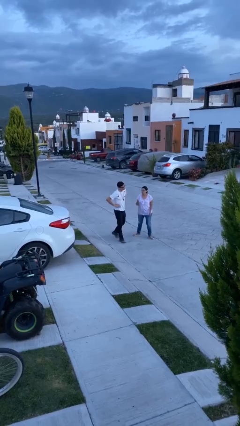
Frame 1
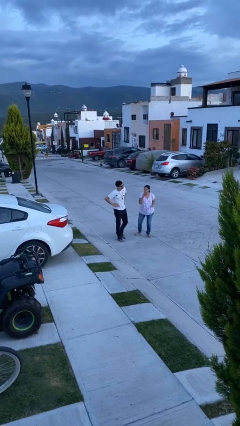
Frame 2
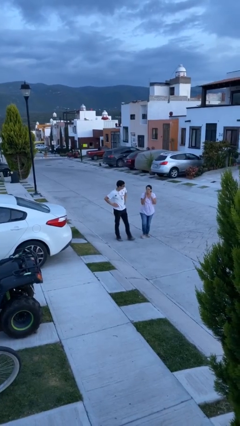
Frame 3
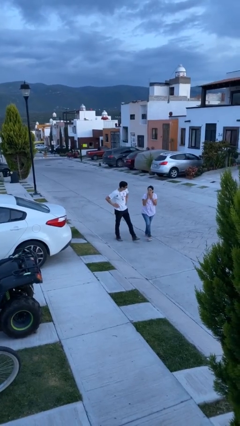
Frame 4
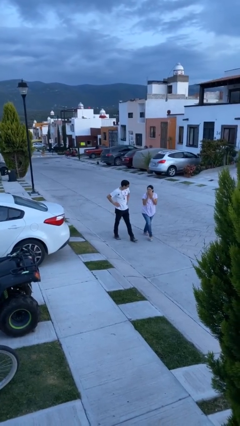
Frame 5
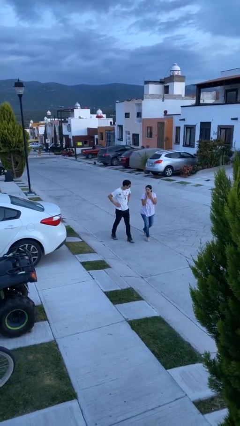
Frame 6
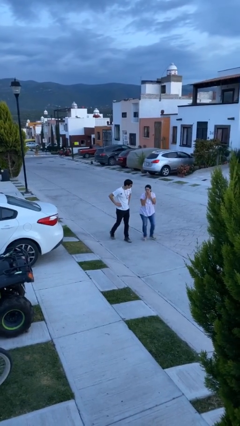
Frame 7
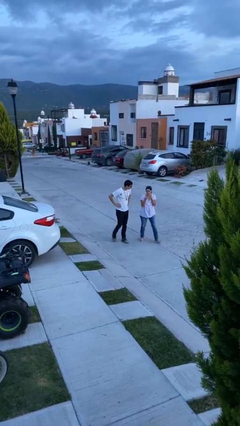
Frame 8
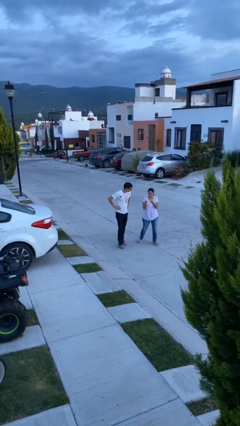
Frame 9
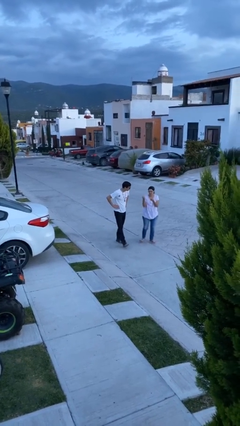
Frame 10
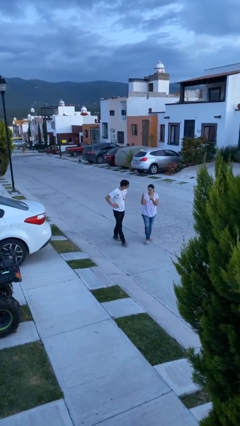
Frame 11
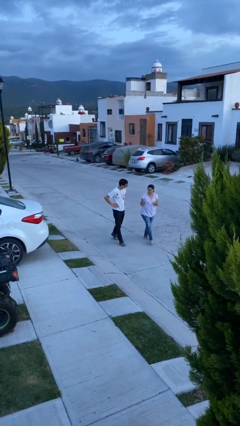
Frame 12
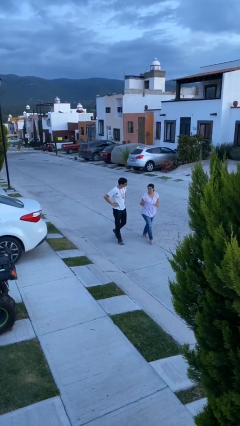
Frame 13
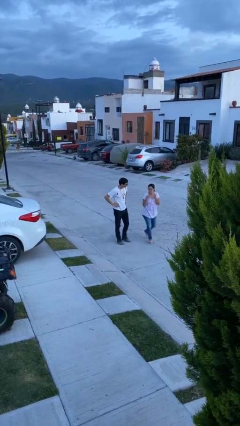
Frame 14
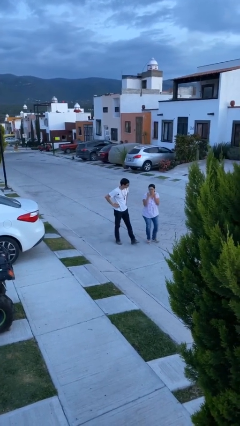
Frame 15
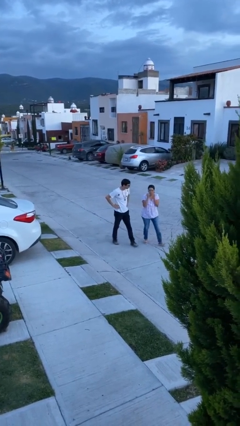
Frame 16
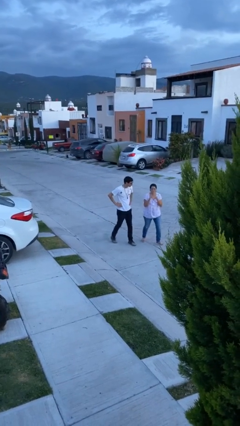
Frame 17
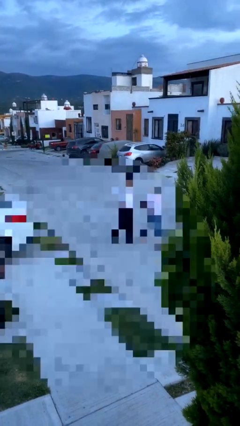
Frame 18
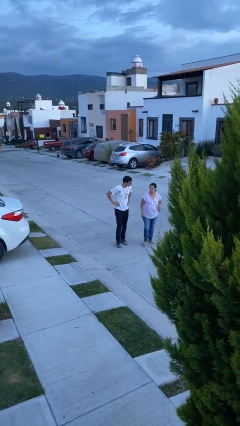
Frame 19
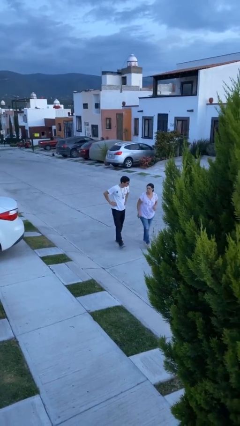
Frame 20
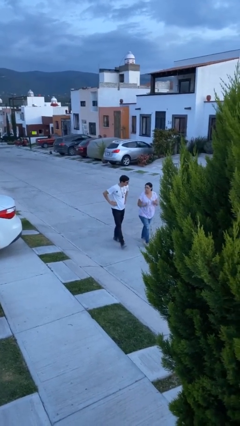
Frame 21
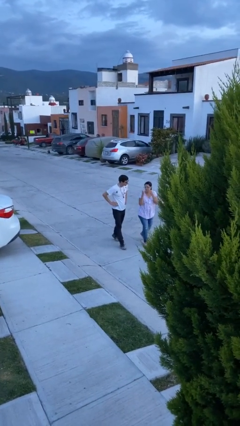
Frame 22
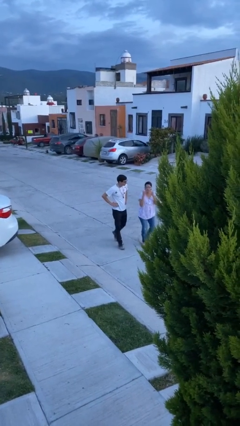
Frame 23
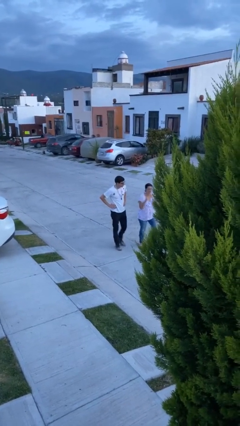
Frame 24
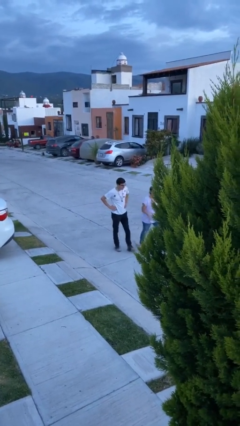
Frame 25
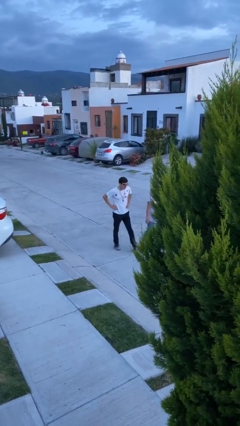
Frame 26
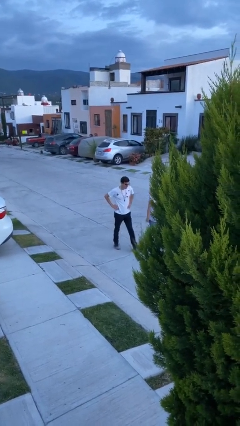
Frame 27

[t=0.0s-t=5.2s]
person talks to person

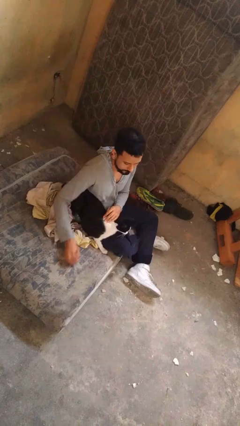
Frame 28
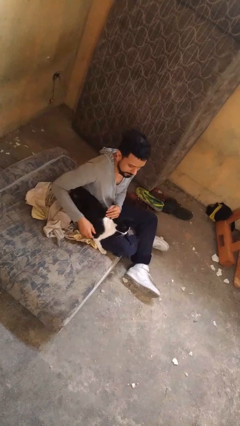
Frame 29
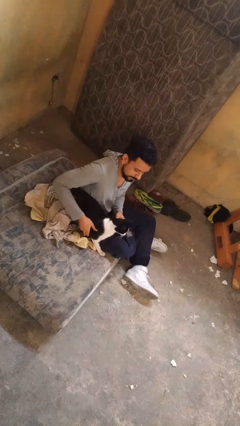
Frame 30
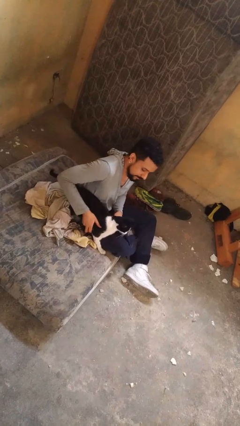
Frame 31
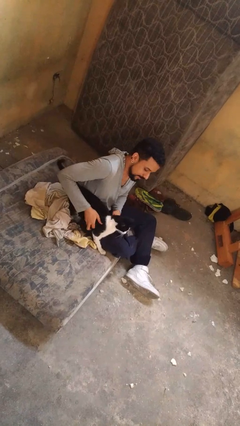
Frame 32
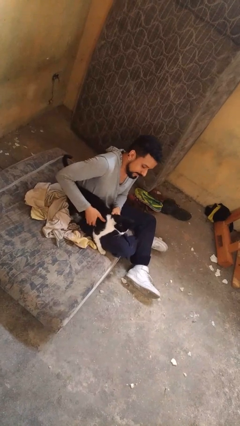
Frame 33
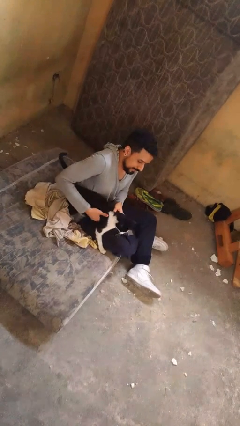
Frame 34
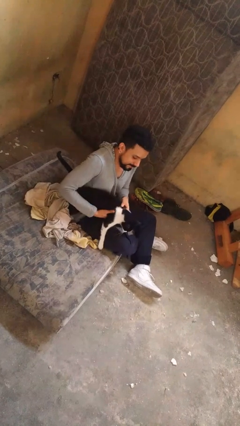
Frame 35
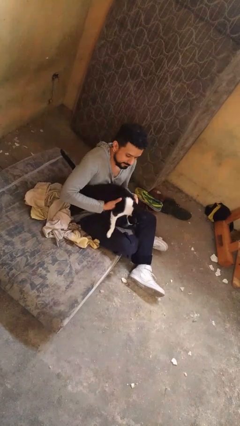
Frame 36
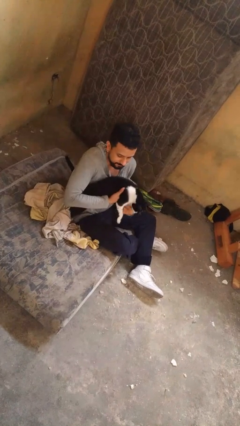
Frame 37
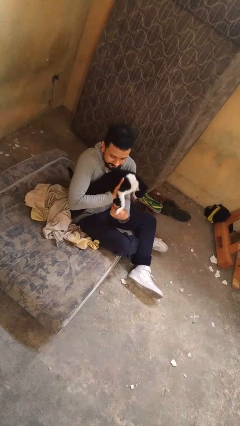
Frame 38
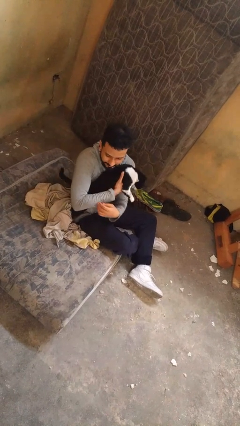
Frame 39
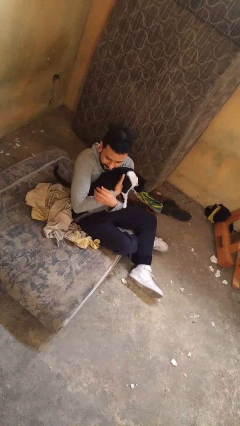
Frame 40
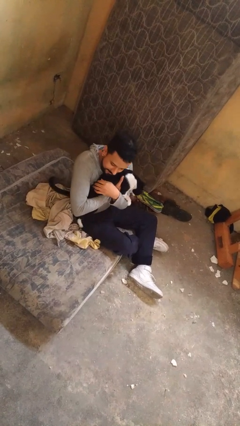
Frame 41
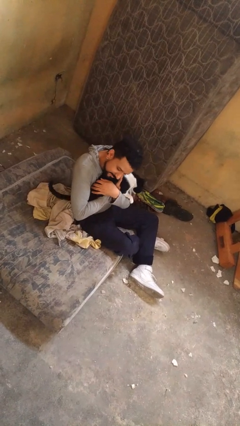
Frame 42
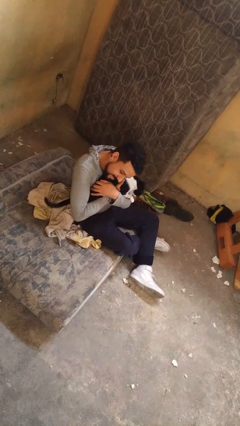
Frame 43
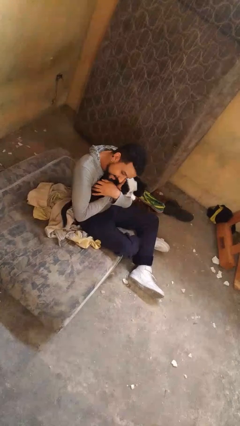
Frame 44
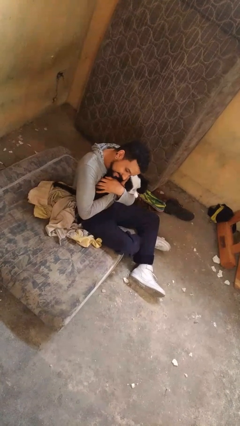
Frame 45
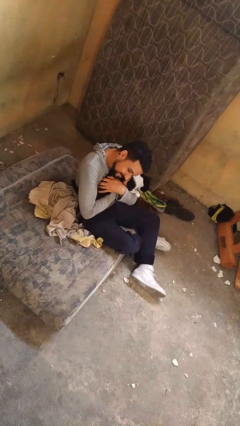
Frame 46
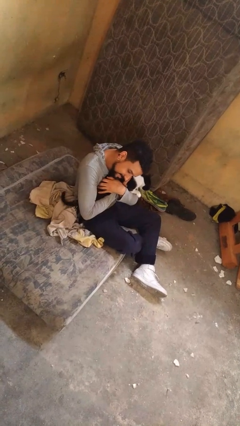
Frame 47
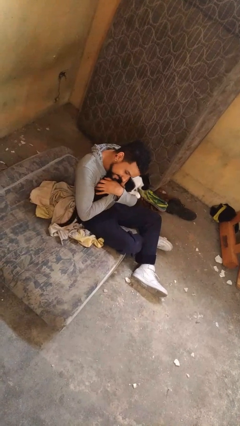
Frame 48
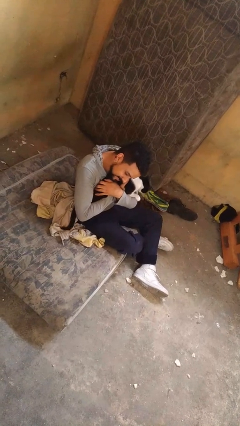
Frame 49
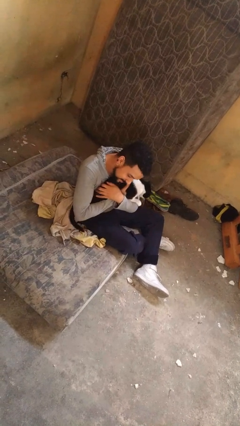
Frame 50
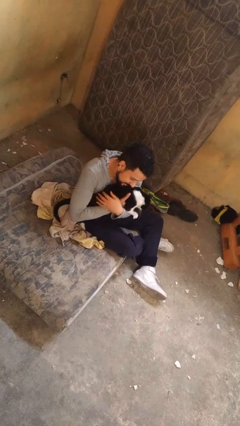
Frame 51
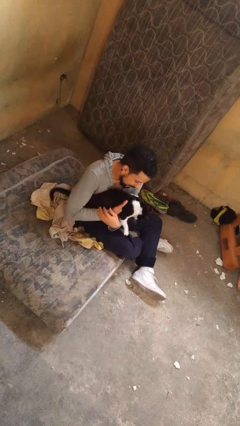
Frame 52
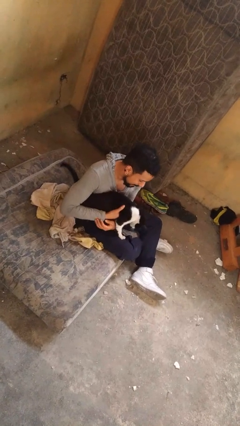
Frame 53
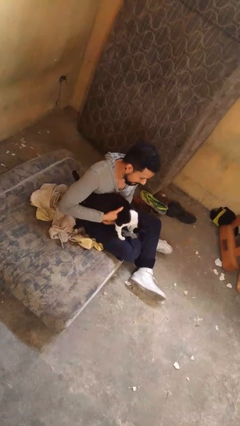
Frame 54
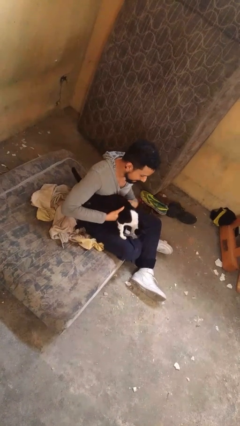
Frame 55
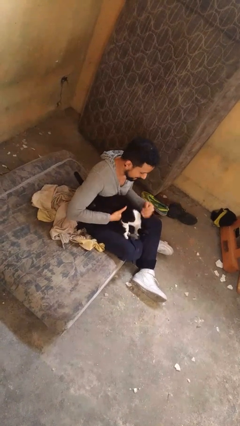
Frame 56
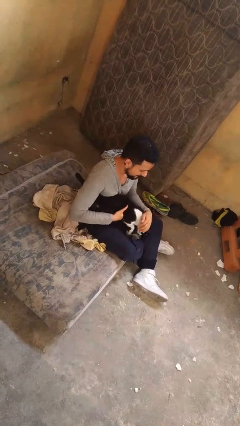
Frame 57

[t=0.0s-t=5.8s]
person hugs cat

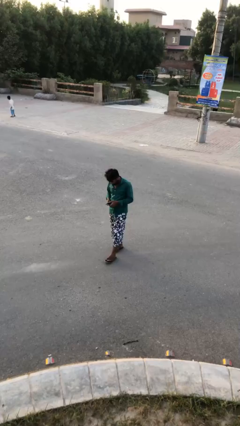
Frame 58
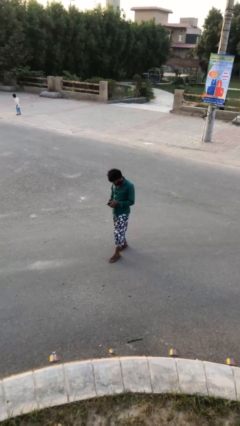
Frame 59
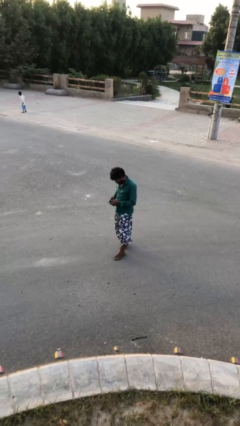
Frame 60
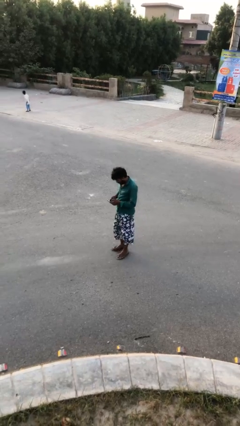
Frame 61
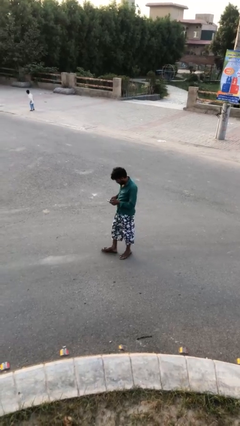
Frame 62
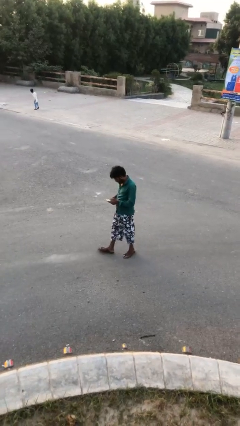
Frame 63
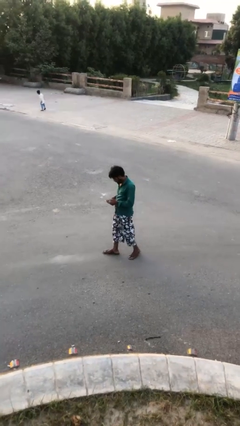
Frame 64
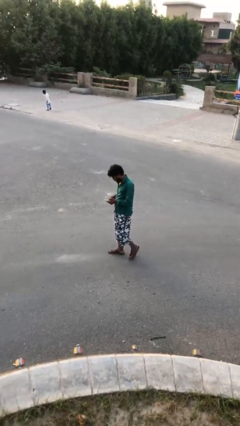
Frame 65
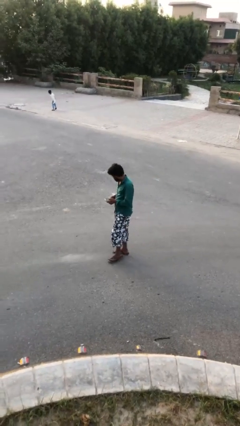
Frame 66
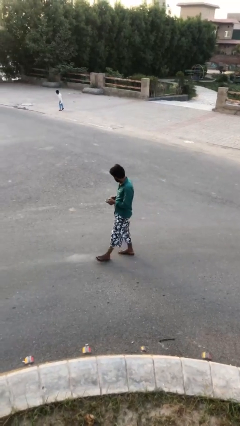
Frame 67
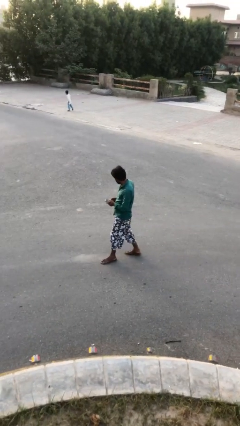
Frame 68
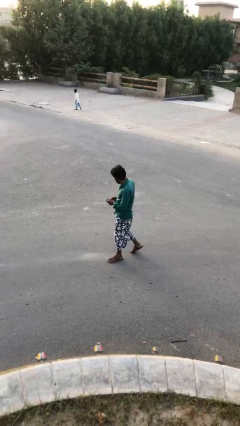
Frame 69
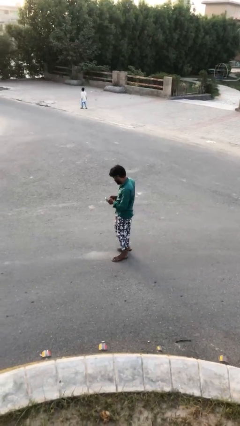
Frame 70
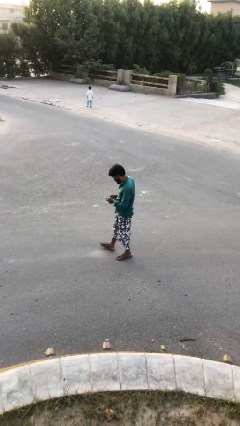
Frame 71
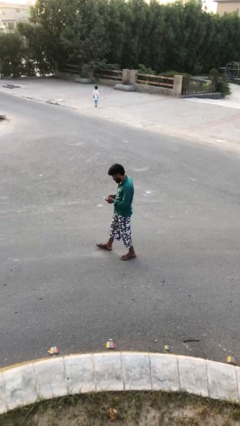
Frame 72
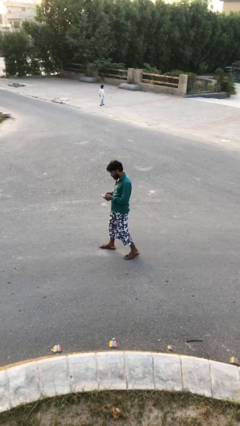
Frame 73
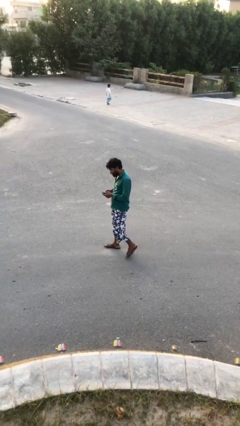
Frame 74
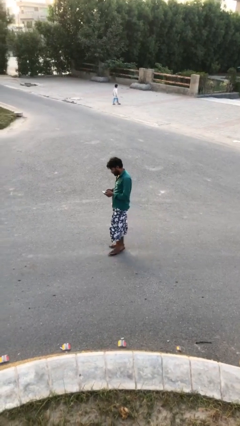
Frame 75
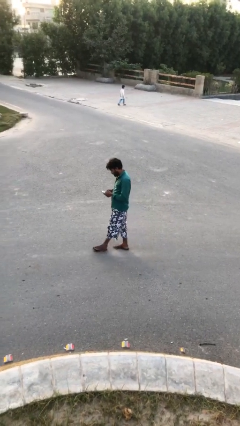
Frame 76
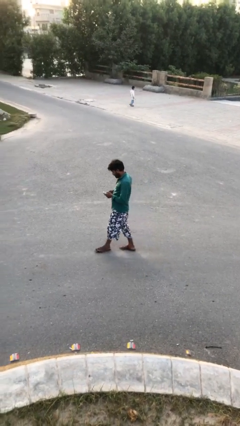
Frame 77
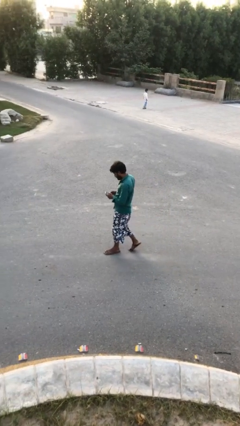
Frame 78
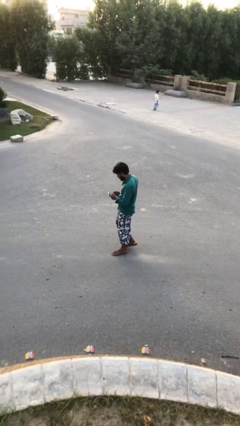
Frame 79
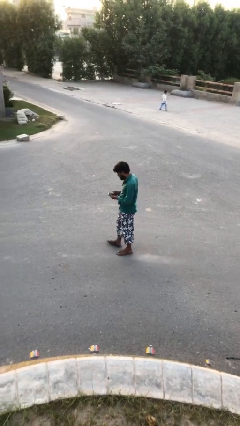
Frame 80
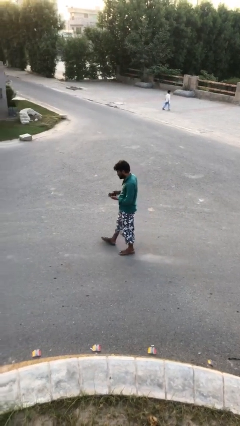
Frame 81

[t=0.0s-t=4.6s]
person texts on phone

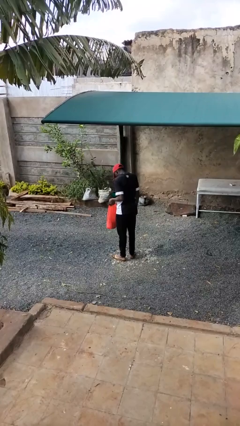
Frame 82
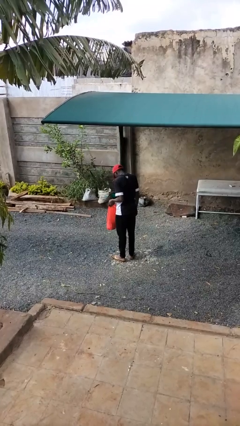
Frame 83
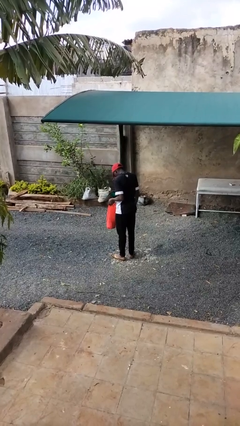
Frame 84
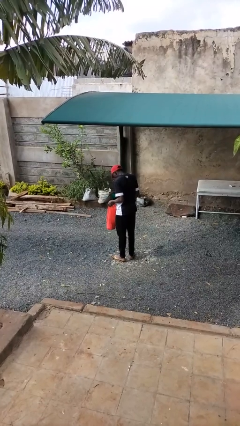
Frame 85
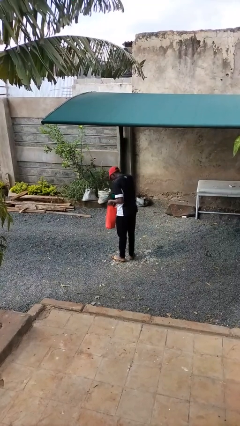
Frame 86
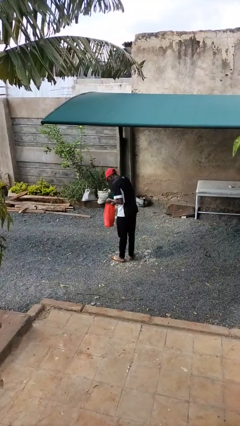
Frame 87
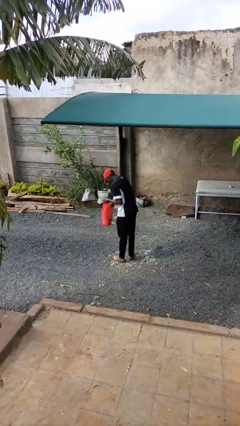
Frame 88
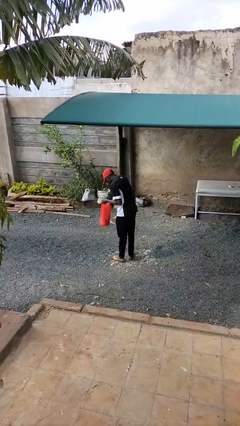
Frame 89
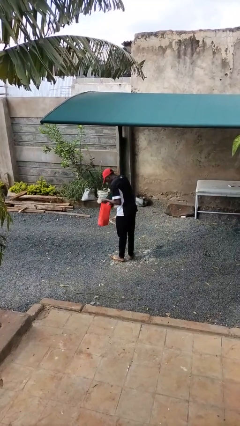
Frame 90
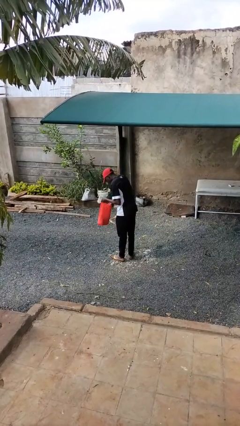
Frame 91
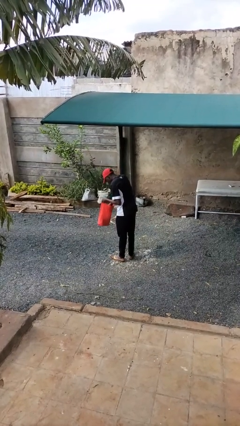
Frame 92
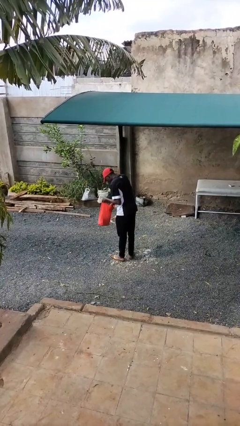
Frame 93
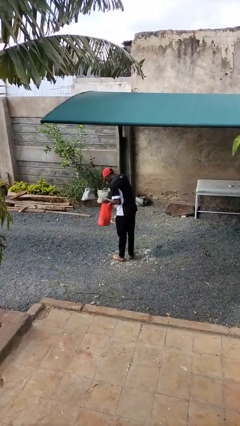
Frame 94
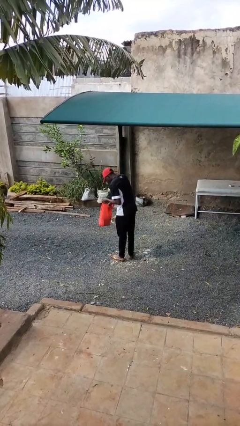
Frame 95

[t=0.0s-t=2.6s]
person searches in bag
